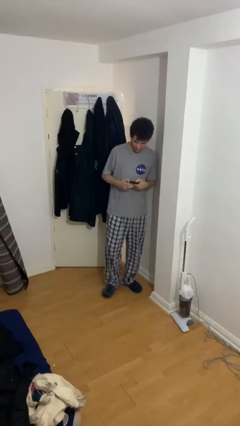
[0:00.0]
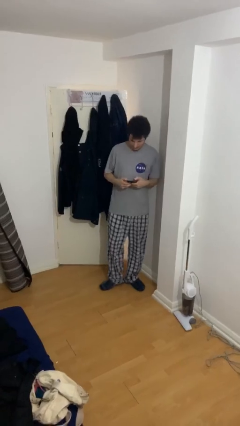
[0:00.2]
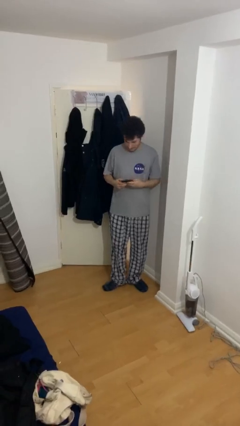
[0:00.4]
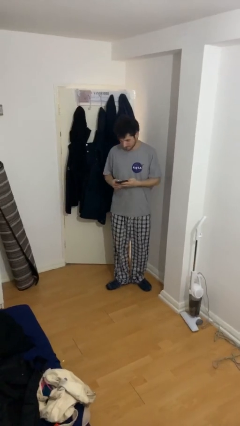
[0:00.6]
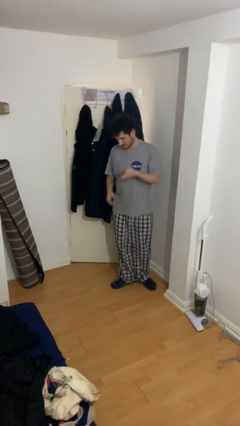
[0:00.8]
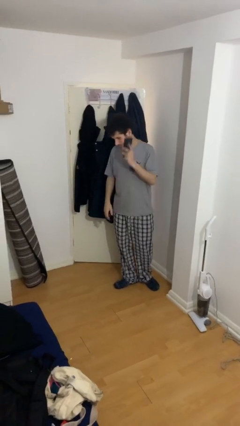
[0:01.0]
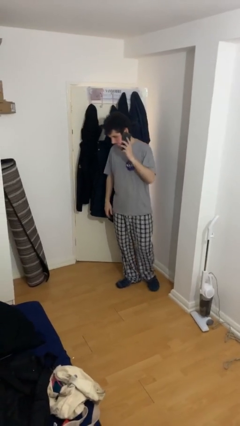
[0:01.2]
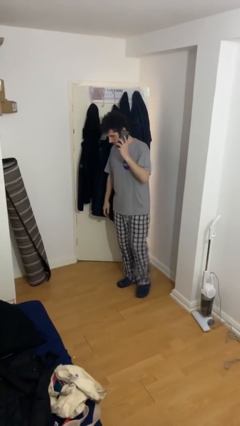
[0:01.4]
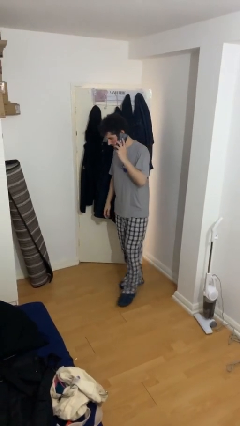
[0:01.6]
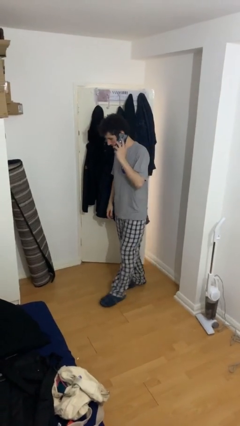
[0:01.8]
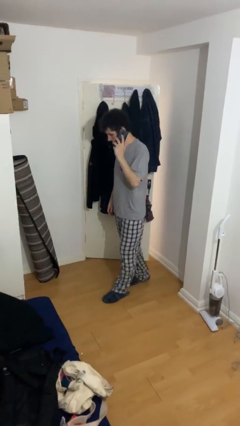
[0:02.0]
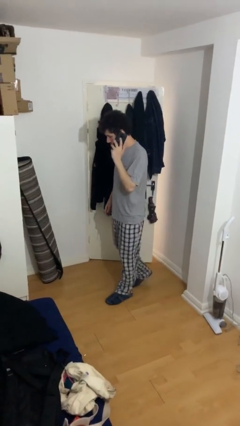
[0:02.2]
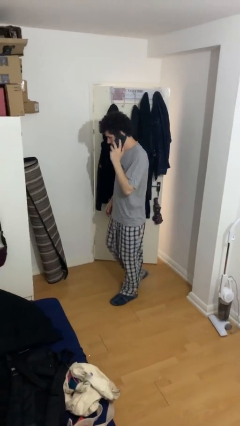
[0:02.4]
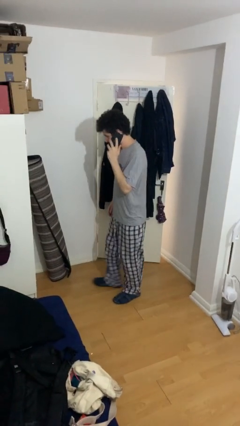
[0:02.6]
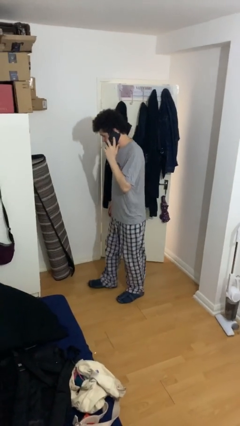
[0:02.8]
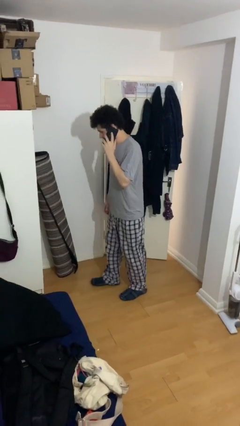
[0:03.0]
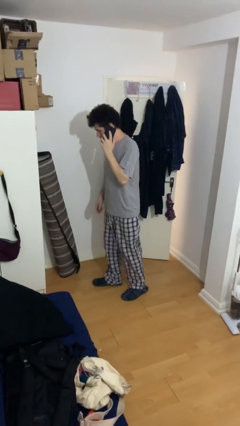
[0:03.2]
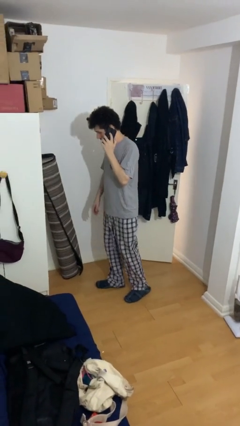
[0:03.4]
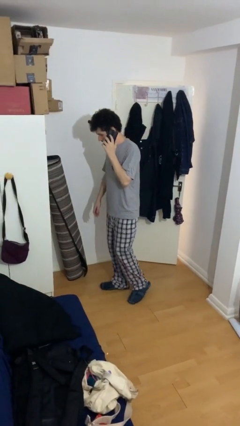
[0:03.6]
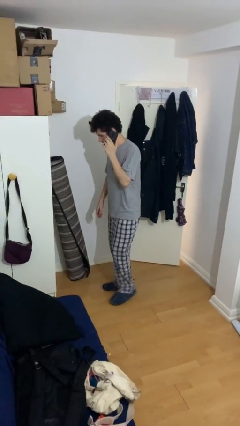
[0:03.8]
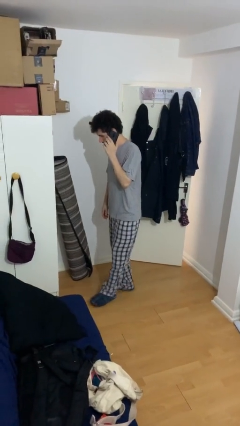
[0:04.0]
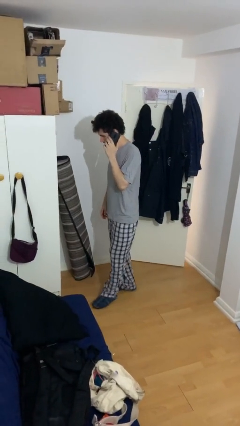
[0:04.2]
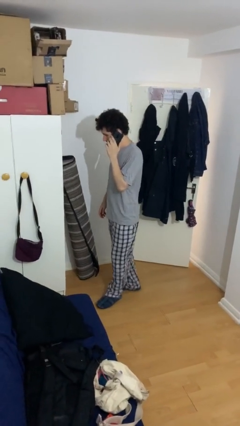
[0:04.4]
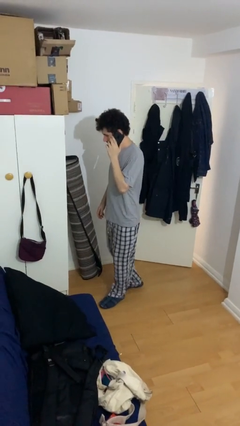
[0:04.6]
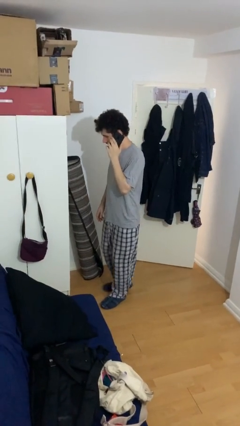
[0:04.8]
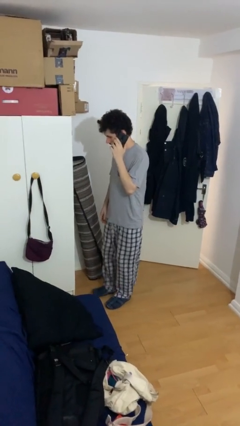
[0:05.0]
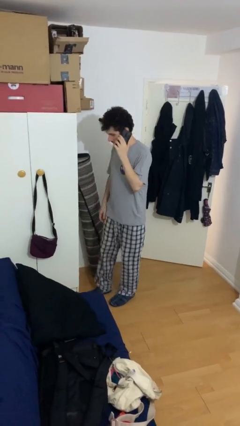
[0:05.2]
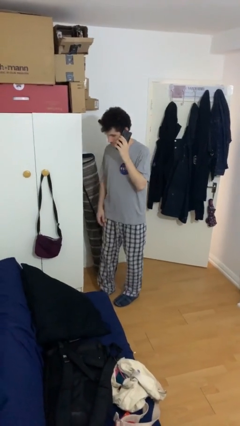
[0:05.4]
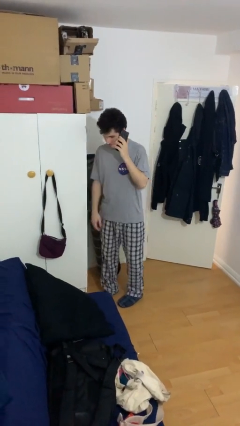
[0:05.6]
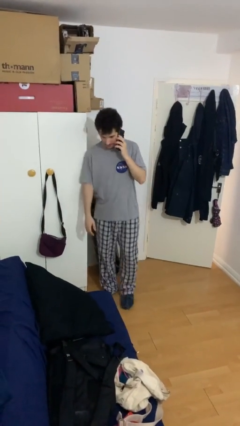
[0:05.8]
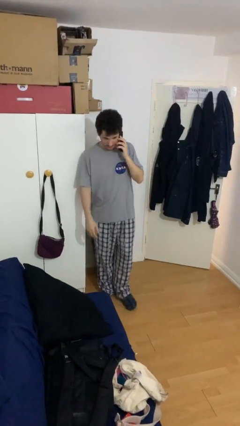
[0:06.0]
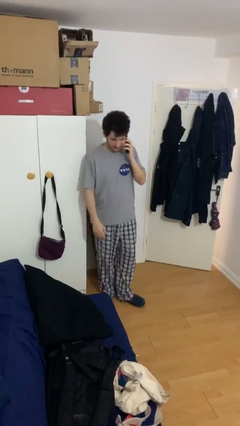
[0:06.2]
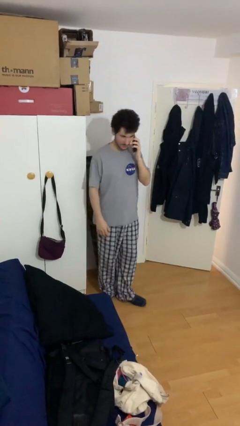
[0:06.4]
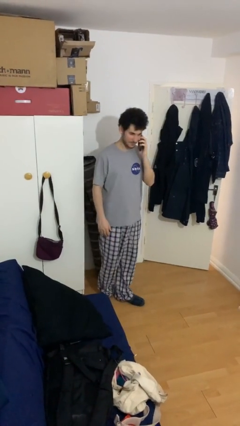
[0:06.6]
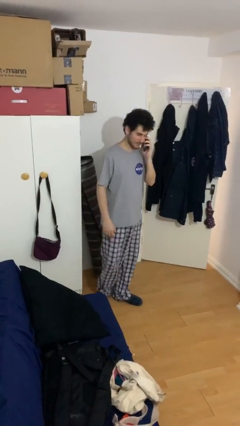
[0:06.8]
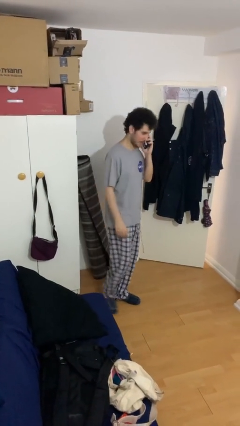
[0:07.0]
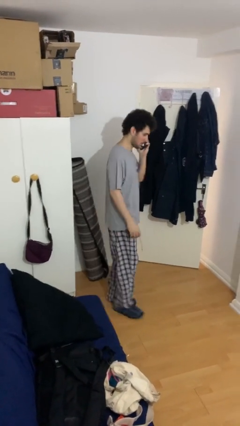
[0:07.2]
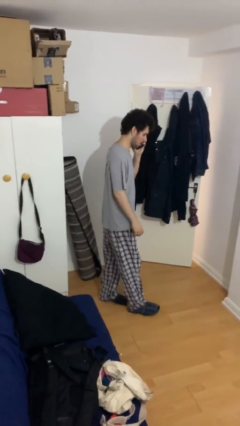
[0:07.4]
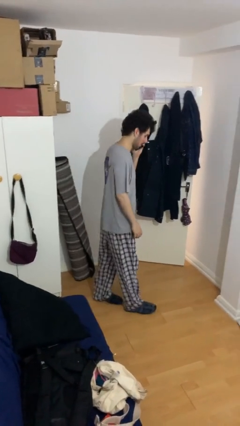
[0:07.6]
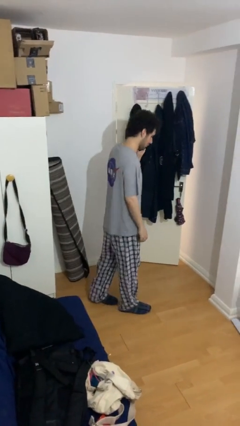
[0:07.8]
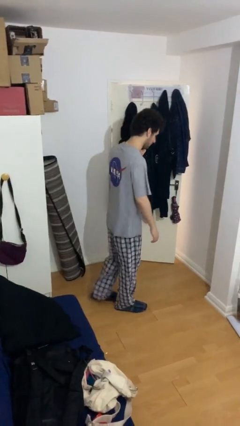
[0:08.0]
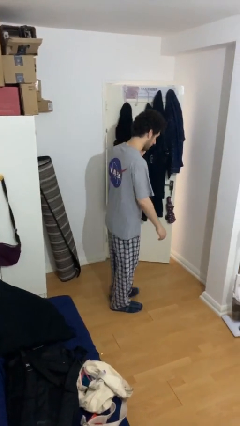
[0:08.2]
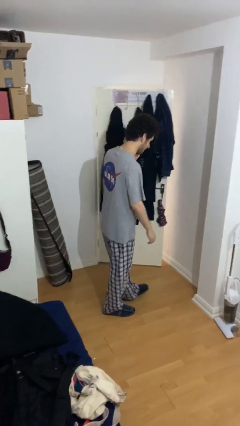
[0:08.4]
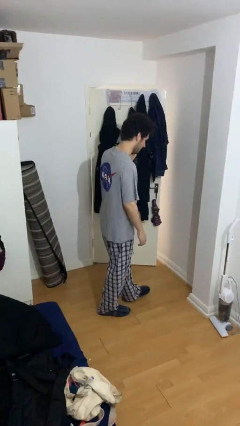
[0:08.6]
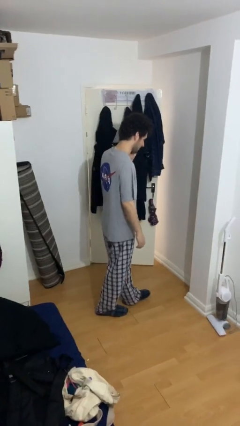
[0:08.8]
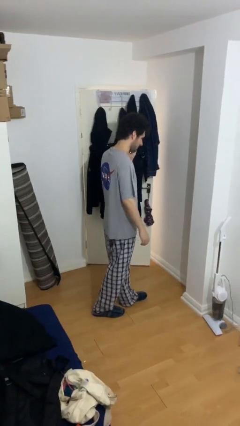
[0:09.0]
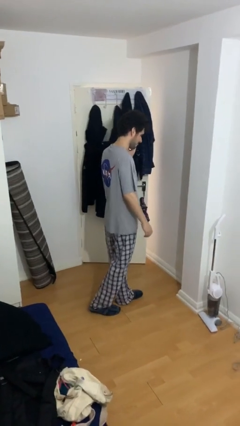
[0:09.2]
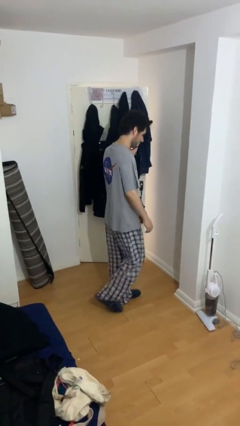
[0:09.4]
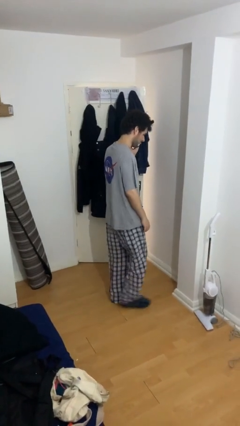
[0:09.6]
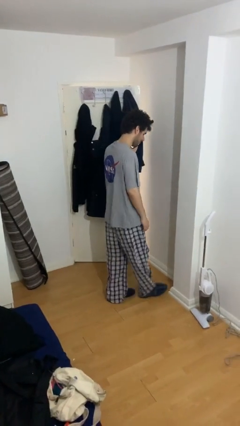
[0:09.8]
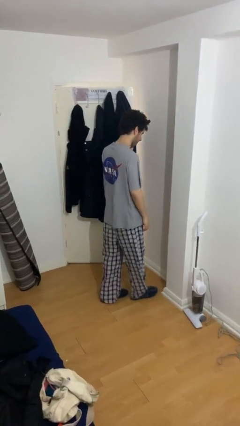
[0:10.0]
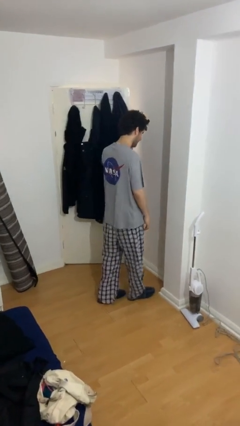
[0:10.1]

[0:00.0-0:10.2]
person talks on phone

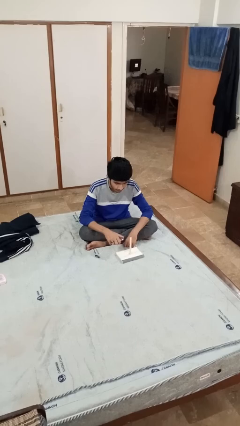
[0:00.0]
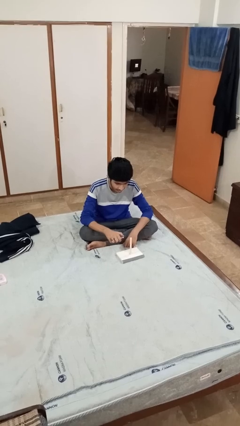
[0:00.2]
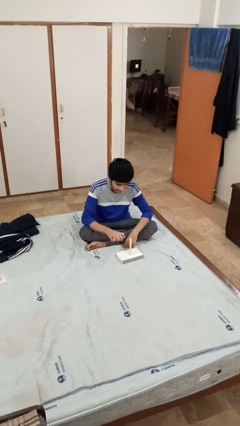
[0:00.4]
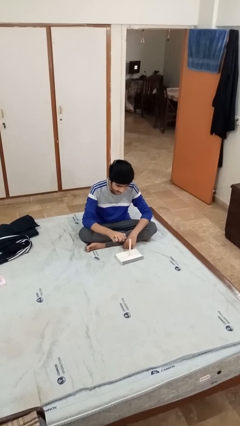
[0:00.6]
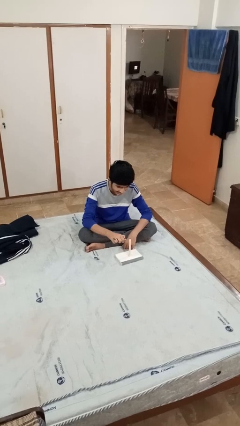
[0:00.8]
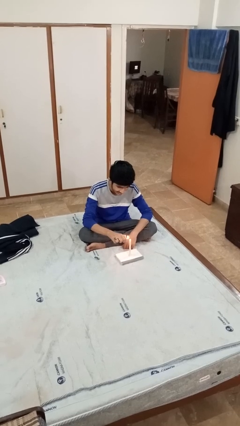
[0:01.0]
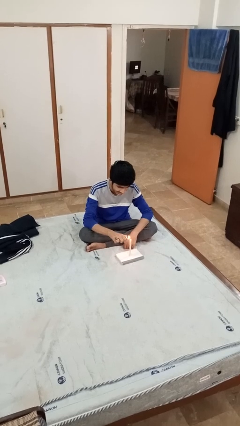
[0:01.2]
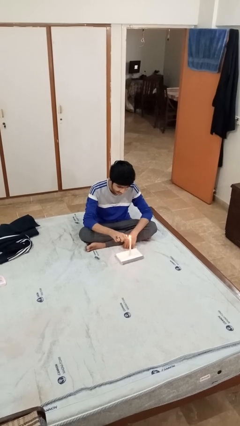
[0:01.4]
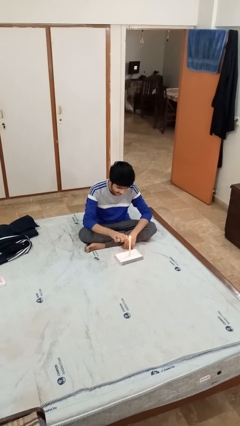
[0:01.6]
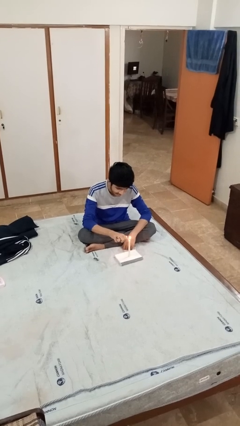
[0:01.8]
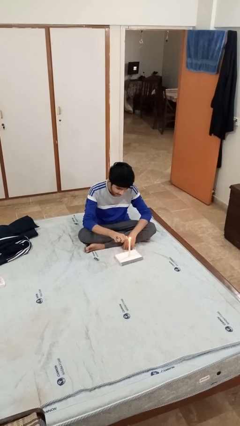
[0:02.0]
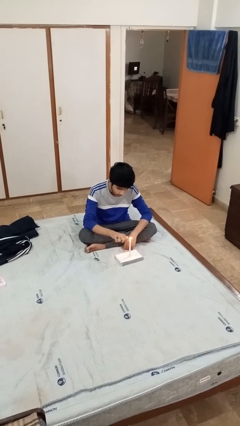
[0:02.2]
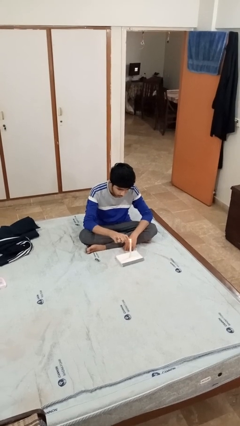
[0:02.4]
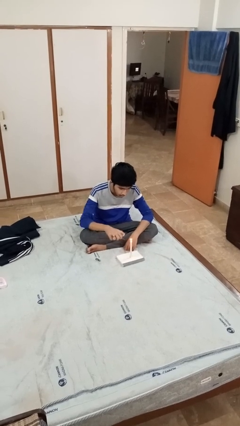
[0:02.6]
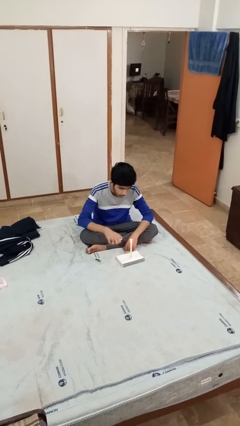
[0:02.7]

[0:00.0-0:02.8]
person lights candle

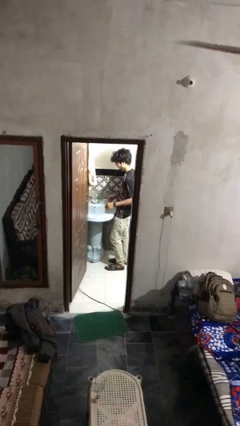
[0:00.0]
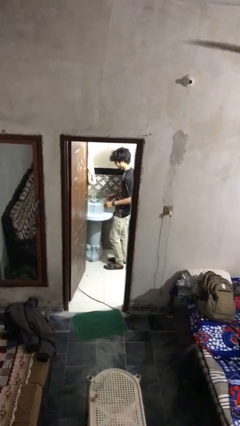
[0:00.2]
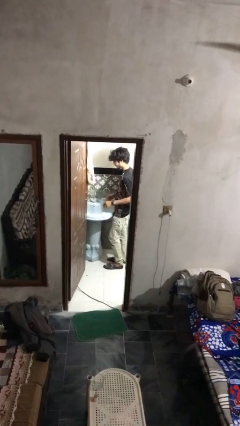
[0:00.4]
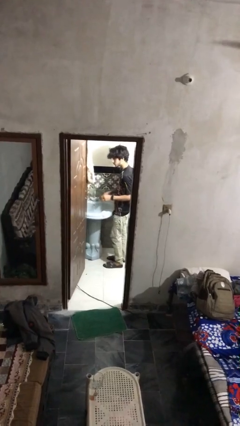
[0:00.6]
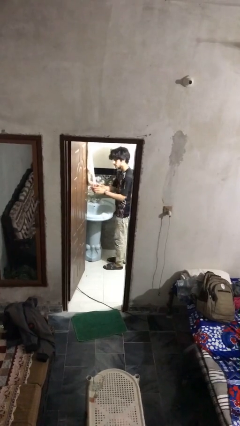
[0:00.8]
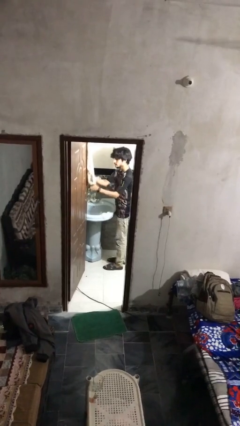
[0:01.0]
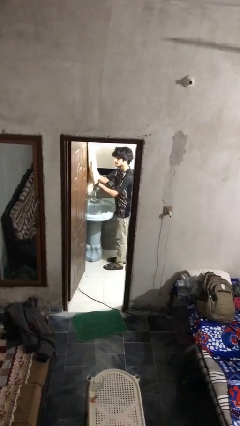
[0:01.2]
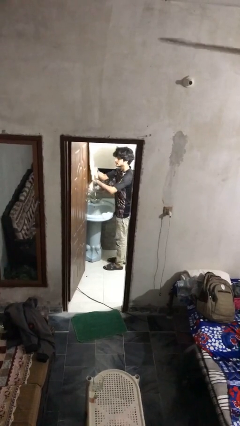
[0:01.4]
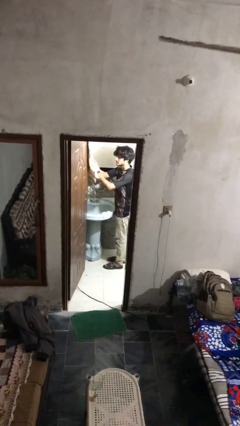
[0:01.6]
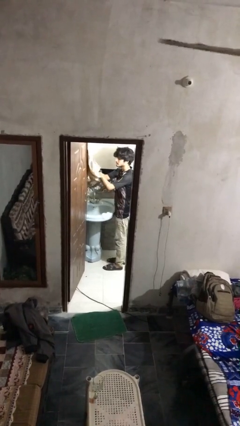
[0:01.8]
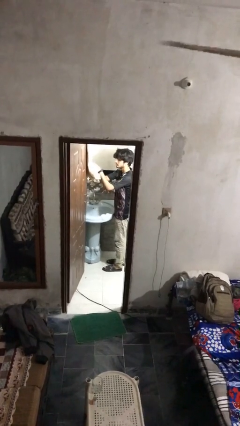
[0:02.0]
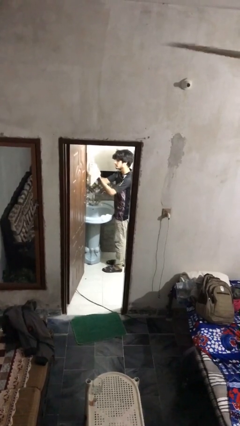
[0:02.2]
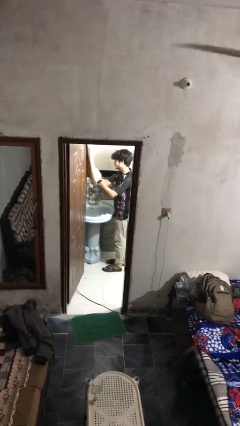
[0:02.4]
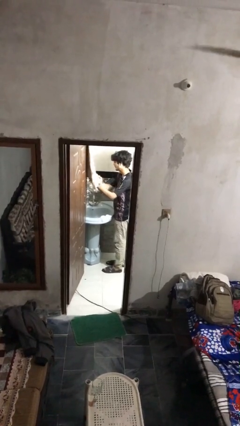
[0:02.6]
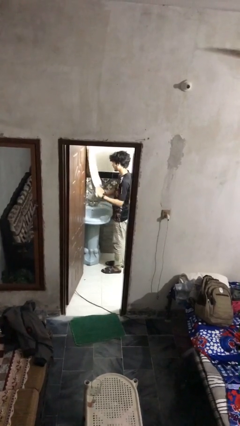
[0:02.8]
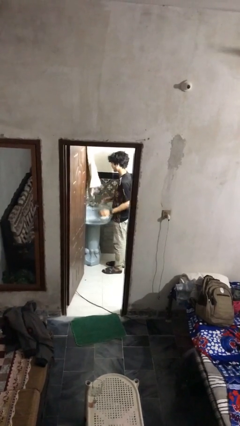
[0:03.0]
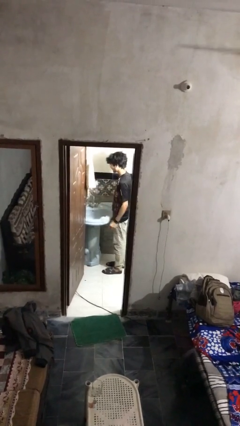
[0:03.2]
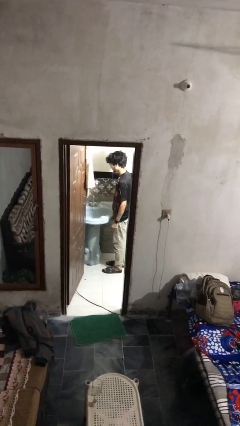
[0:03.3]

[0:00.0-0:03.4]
person dries hands with towel

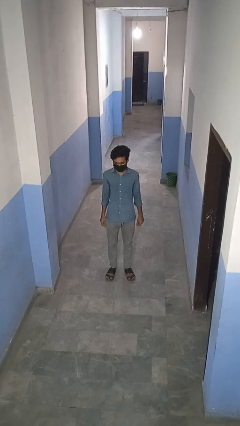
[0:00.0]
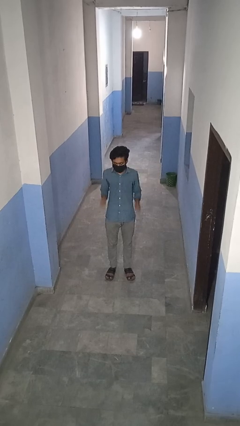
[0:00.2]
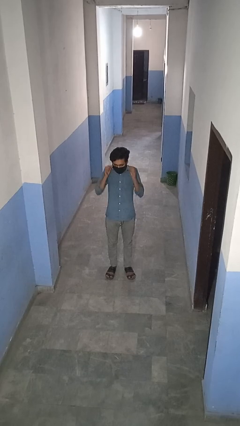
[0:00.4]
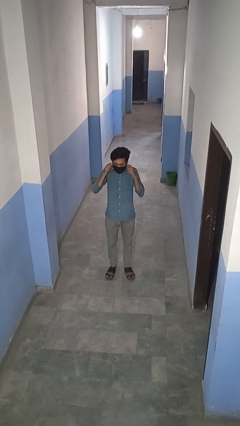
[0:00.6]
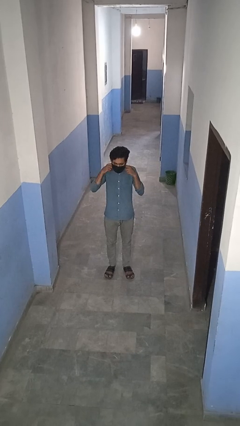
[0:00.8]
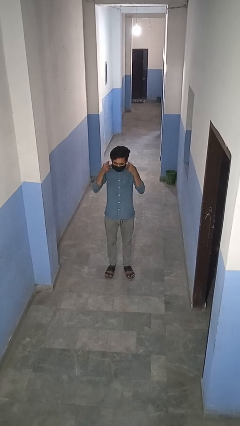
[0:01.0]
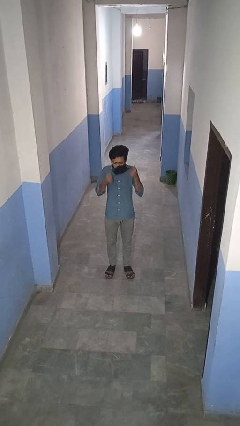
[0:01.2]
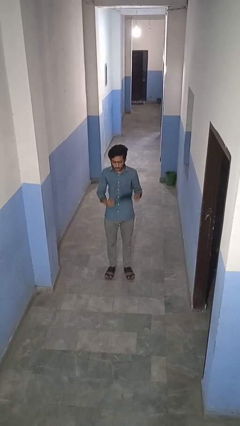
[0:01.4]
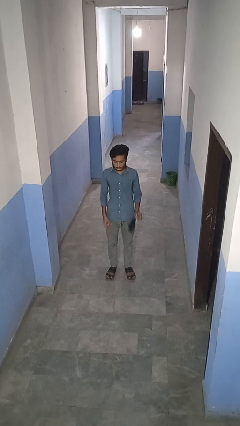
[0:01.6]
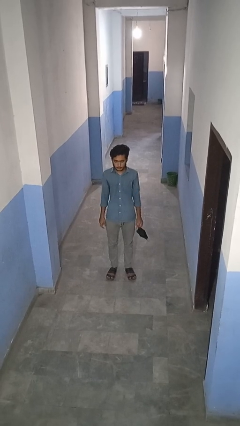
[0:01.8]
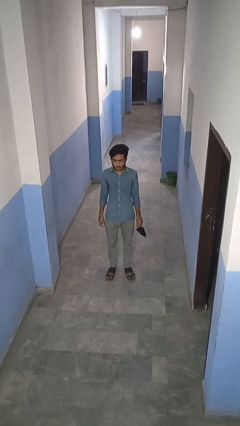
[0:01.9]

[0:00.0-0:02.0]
person takes off facemask
